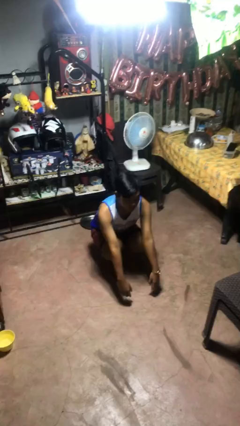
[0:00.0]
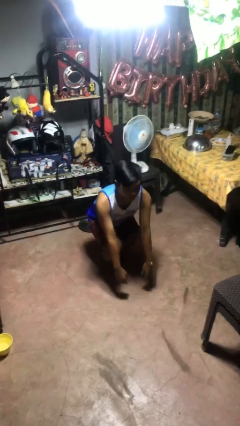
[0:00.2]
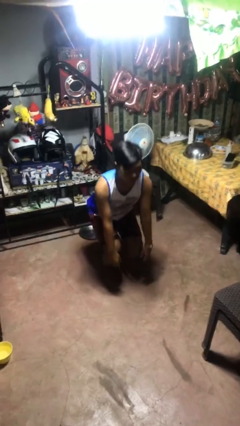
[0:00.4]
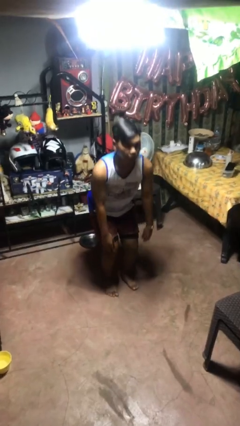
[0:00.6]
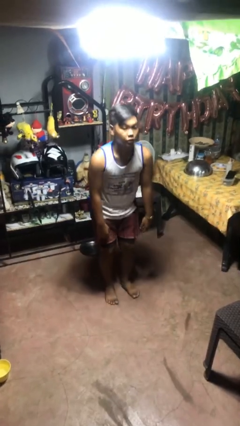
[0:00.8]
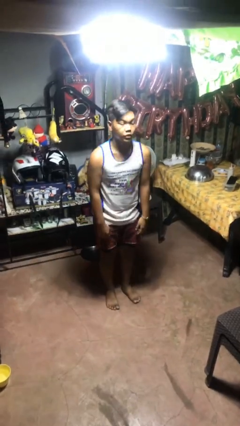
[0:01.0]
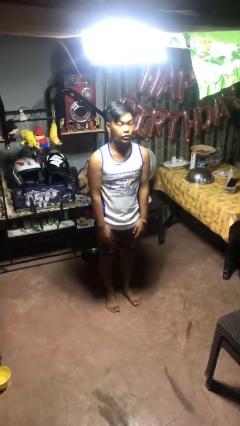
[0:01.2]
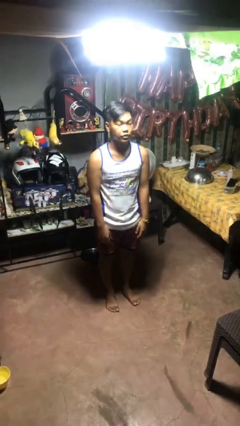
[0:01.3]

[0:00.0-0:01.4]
person stands up

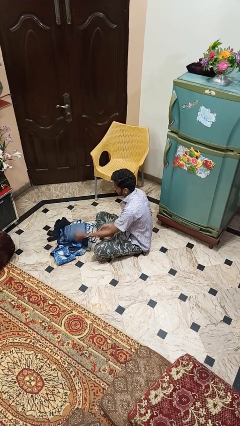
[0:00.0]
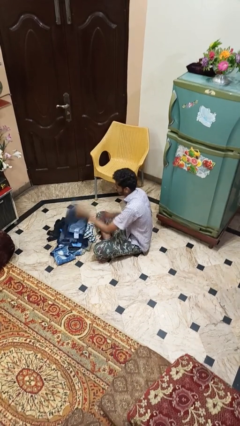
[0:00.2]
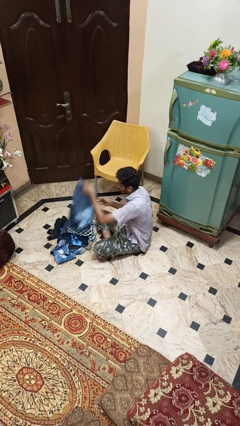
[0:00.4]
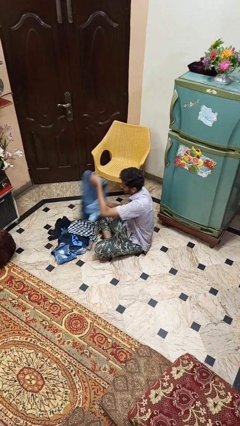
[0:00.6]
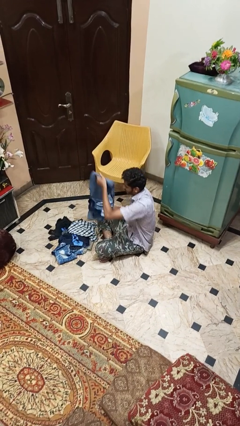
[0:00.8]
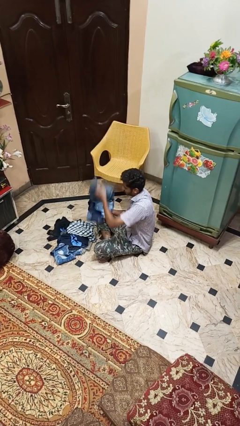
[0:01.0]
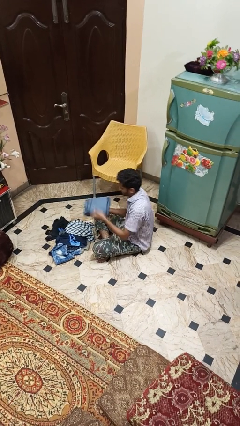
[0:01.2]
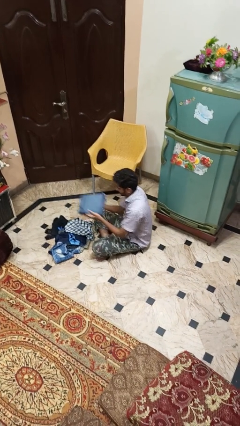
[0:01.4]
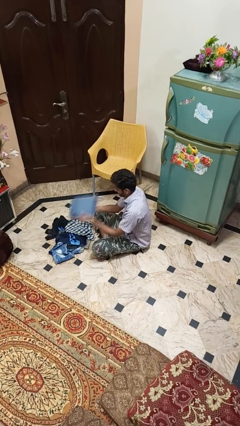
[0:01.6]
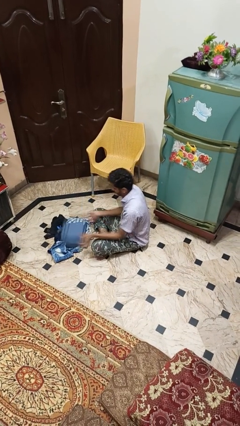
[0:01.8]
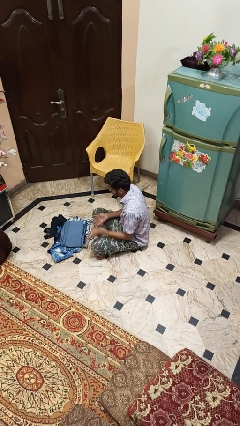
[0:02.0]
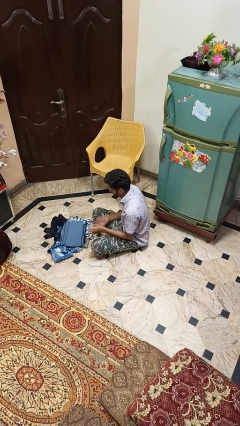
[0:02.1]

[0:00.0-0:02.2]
person folds pants

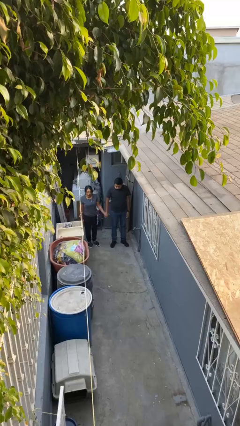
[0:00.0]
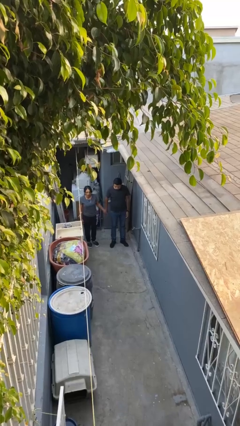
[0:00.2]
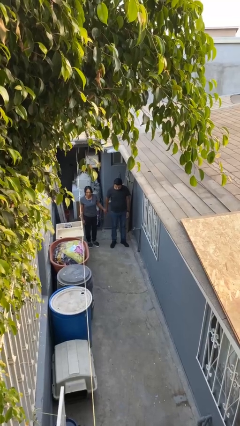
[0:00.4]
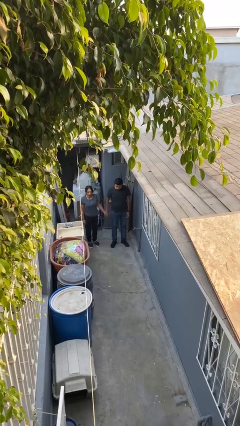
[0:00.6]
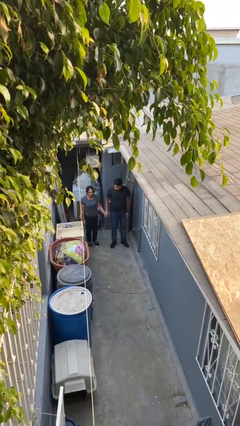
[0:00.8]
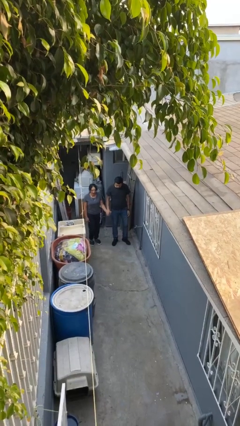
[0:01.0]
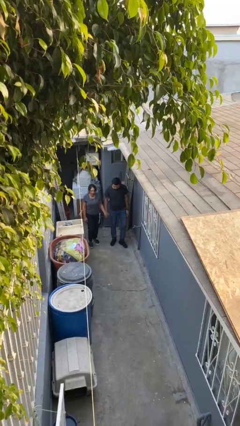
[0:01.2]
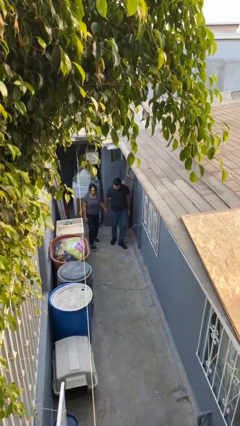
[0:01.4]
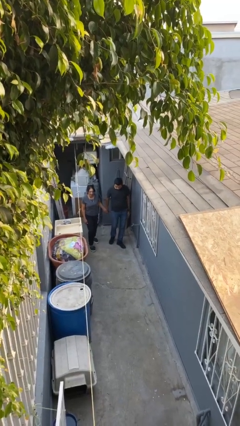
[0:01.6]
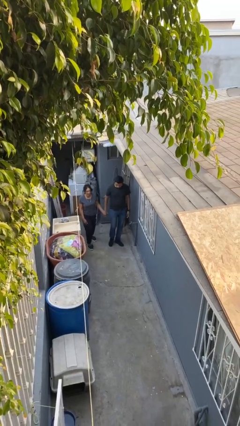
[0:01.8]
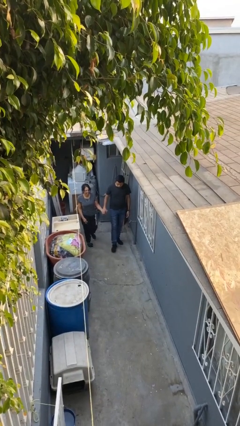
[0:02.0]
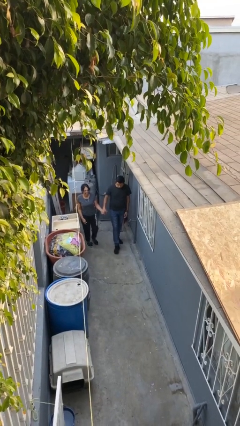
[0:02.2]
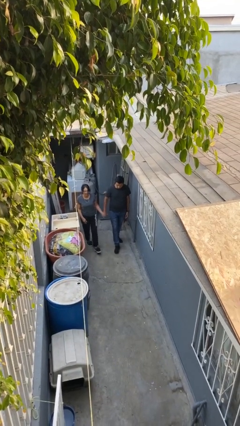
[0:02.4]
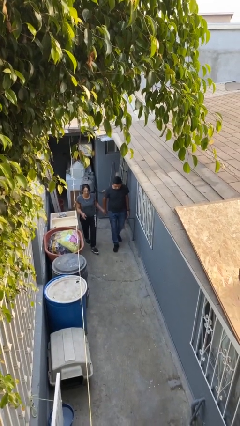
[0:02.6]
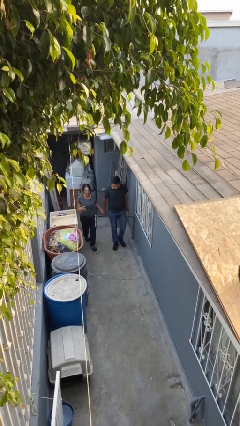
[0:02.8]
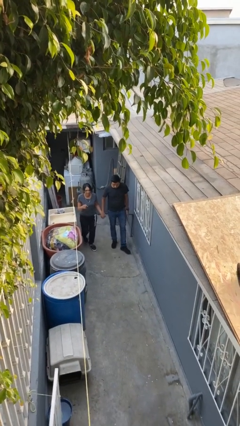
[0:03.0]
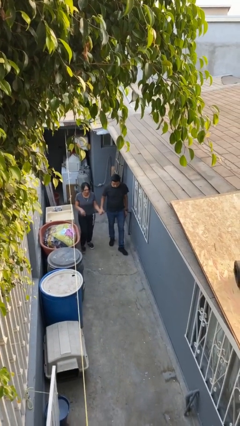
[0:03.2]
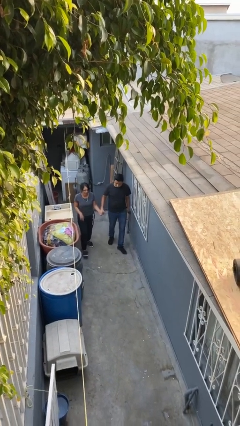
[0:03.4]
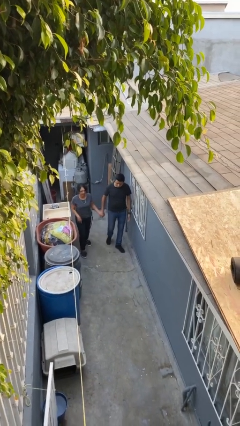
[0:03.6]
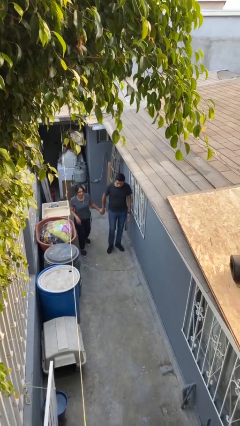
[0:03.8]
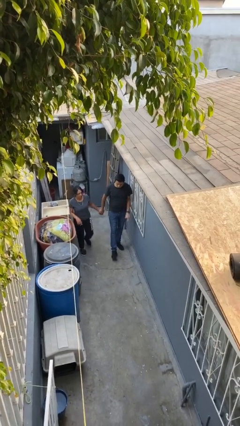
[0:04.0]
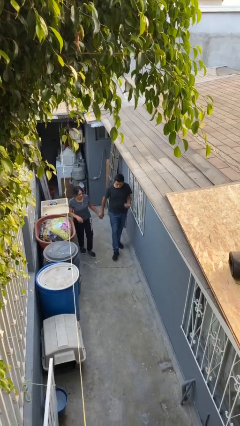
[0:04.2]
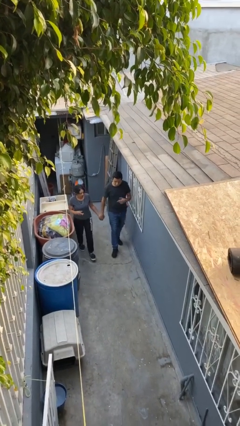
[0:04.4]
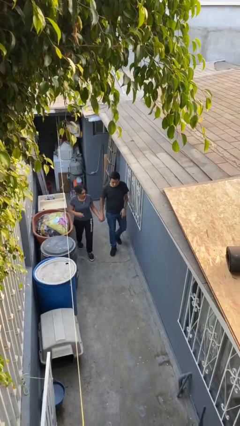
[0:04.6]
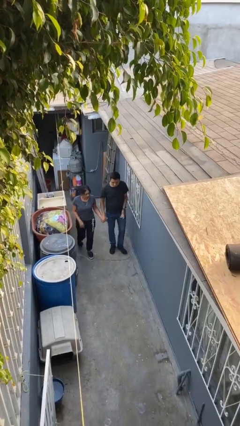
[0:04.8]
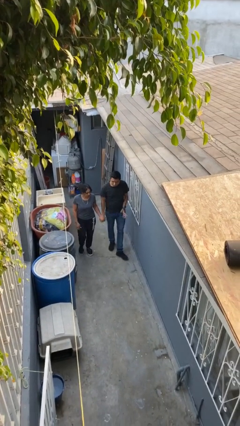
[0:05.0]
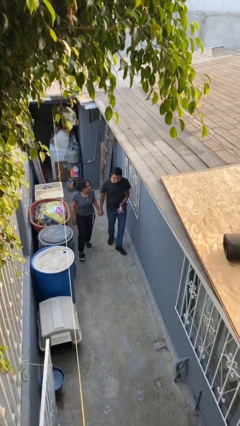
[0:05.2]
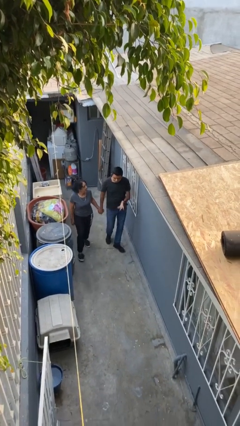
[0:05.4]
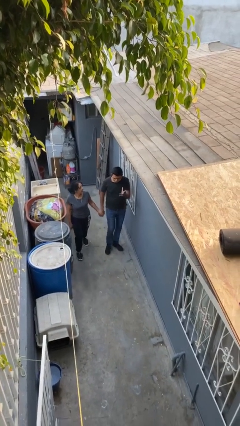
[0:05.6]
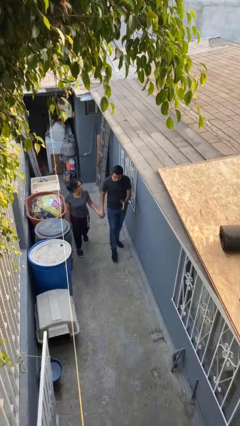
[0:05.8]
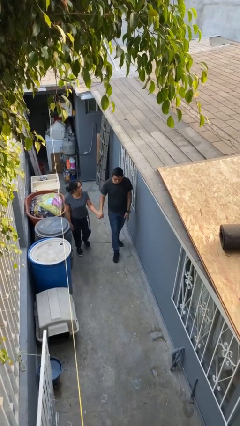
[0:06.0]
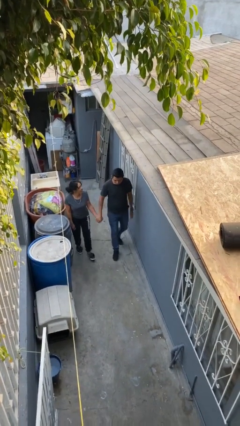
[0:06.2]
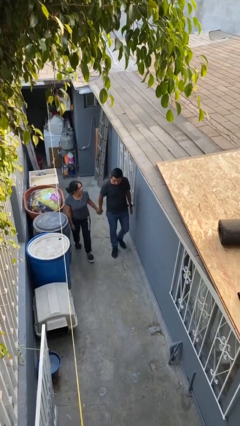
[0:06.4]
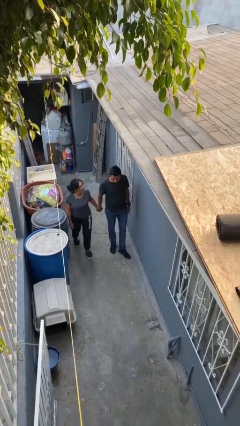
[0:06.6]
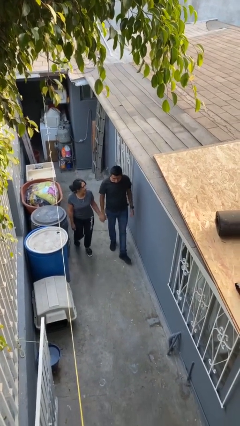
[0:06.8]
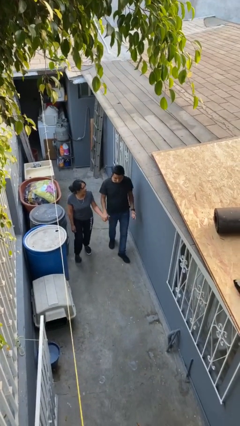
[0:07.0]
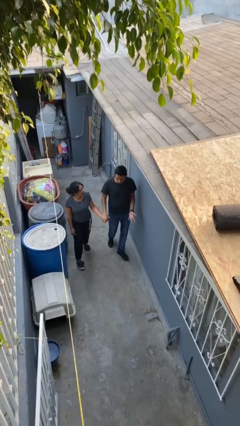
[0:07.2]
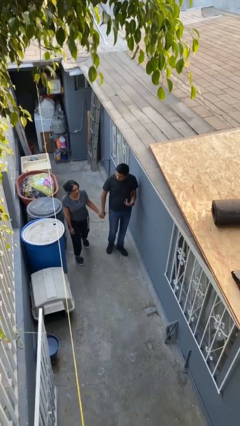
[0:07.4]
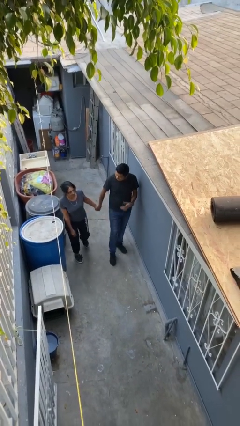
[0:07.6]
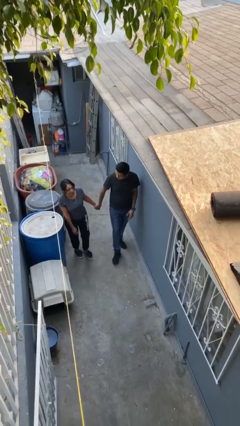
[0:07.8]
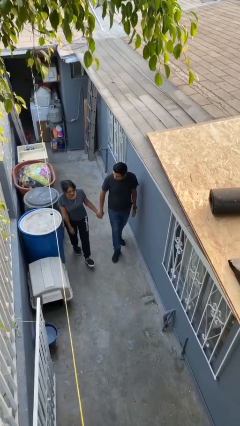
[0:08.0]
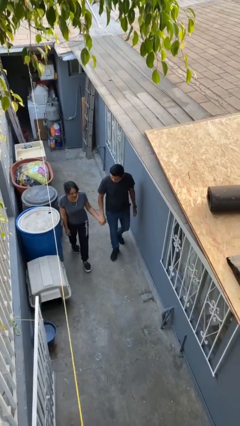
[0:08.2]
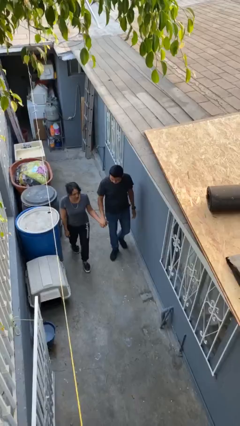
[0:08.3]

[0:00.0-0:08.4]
person holds hand

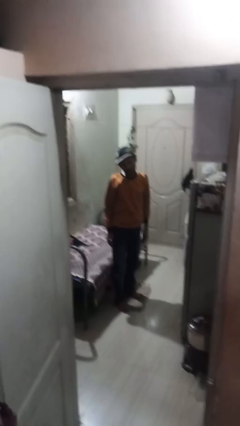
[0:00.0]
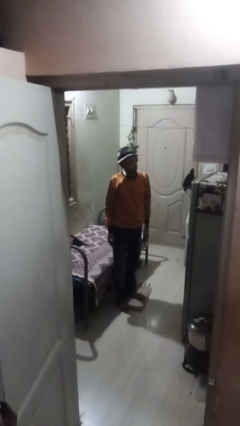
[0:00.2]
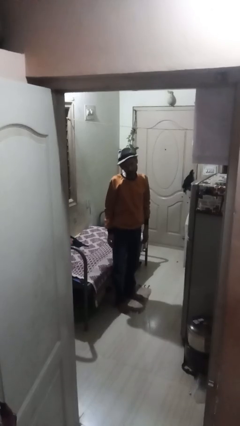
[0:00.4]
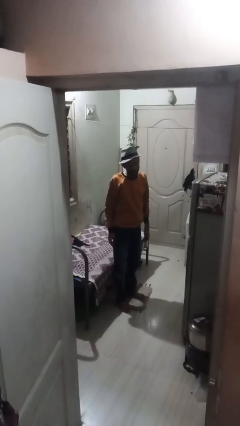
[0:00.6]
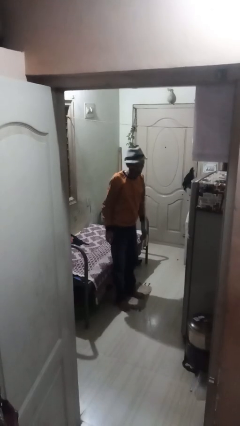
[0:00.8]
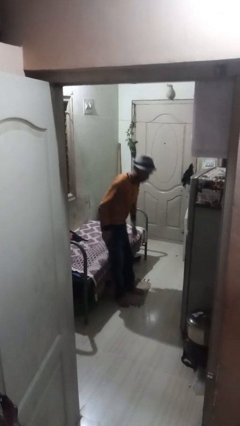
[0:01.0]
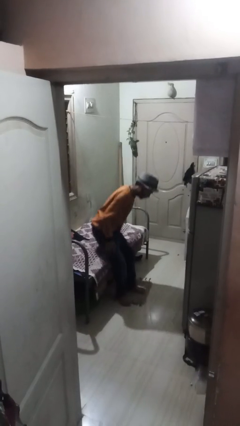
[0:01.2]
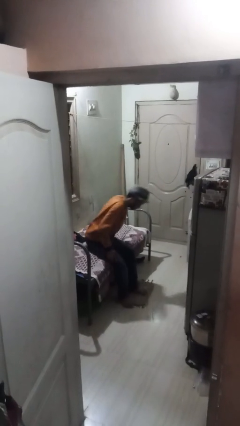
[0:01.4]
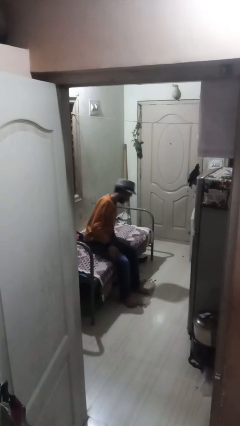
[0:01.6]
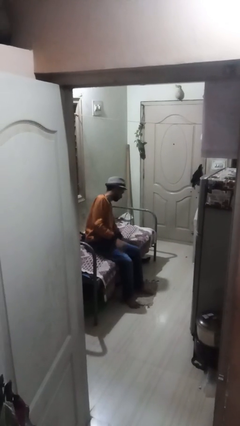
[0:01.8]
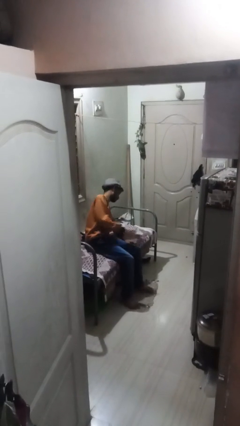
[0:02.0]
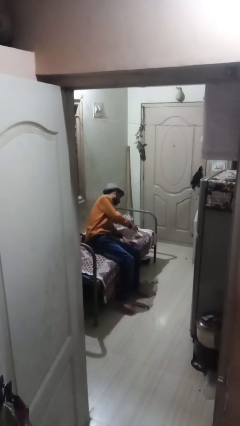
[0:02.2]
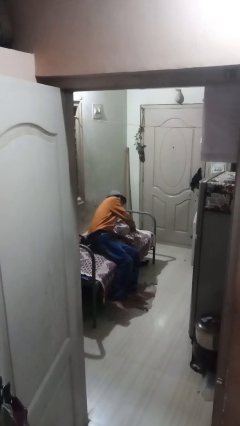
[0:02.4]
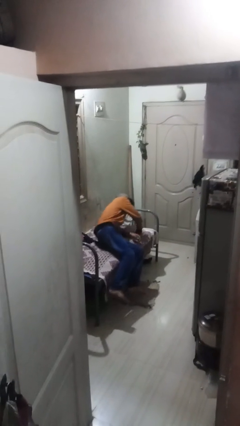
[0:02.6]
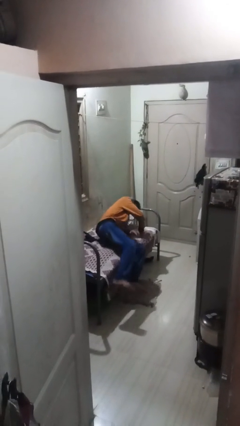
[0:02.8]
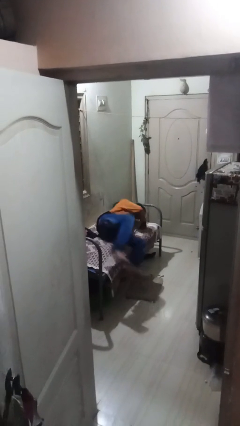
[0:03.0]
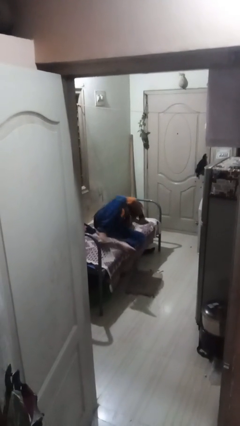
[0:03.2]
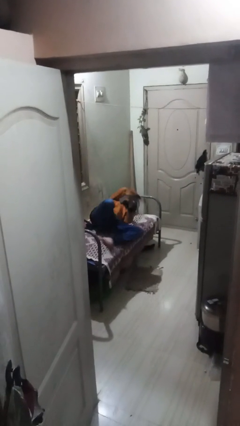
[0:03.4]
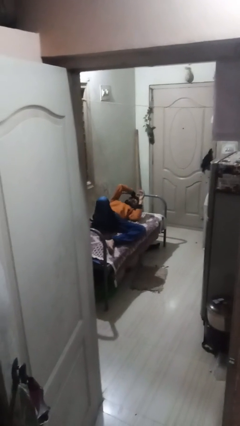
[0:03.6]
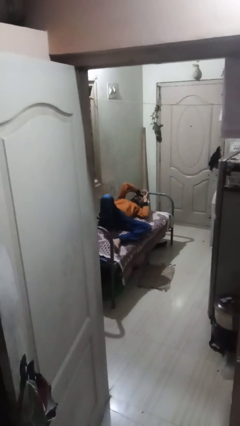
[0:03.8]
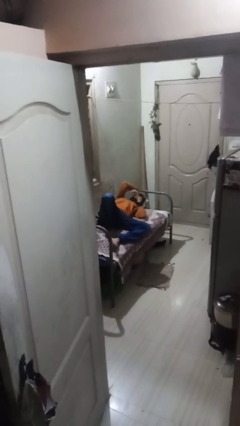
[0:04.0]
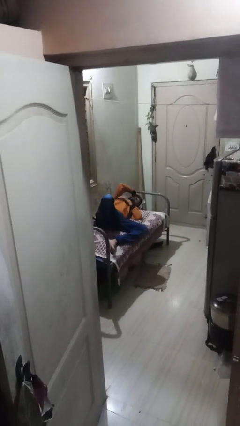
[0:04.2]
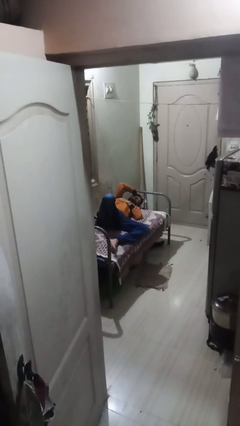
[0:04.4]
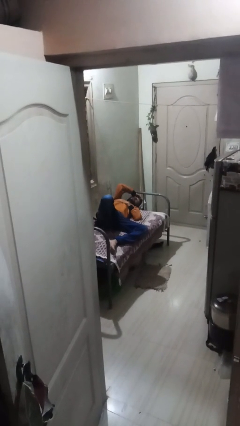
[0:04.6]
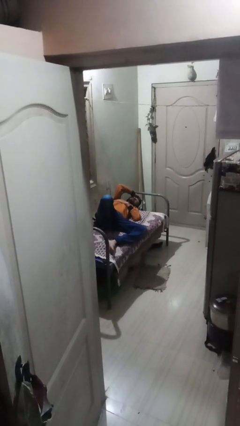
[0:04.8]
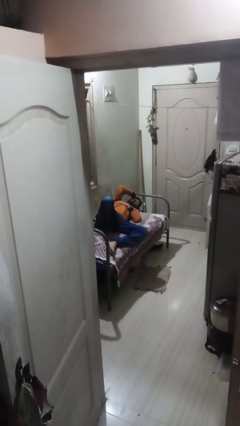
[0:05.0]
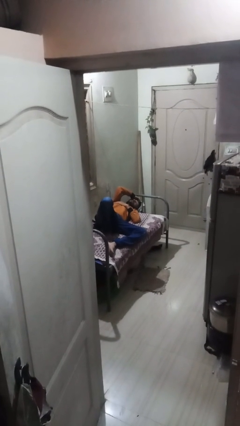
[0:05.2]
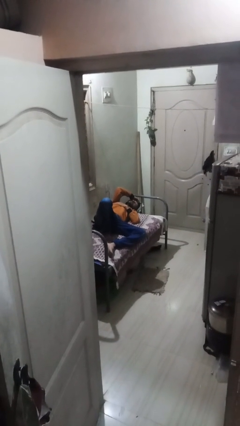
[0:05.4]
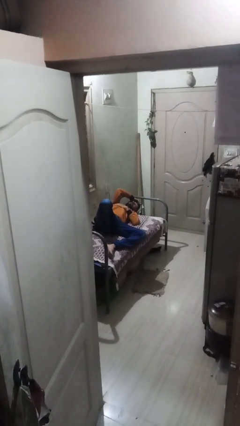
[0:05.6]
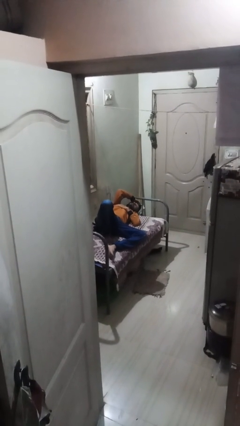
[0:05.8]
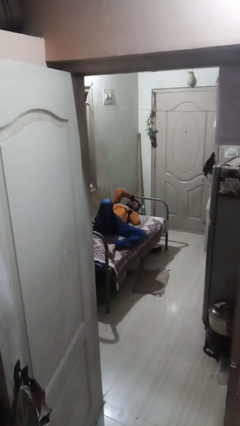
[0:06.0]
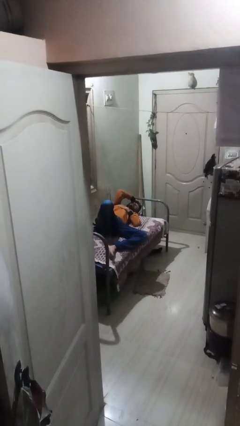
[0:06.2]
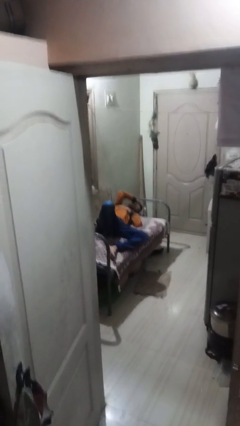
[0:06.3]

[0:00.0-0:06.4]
person lies down on bed
